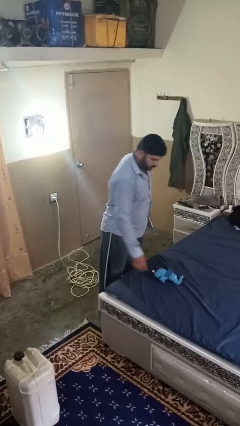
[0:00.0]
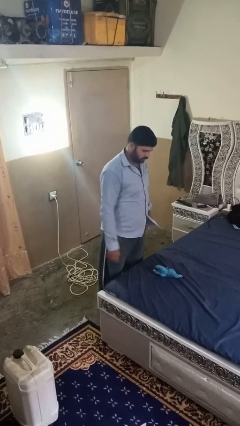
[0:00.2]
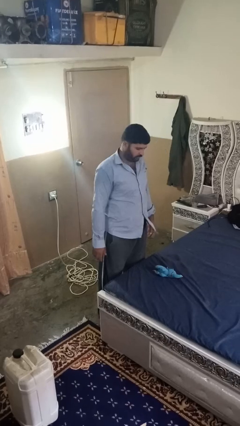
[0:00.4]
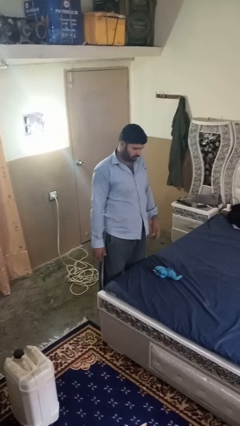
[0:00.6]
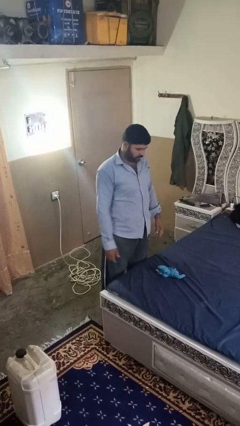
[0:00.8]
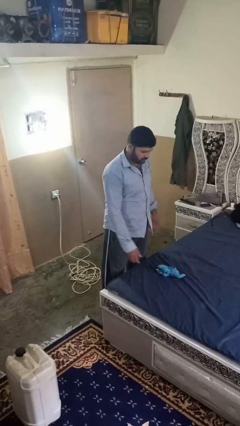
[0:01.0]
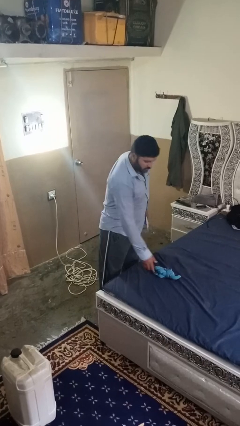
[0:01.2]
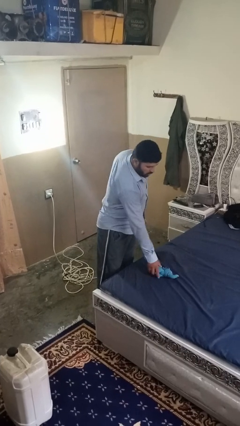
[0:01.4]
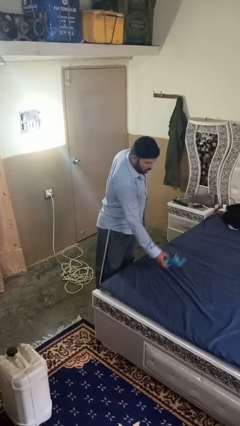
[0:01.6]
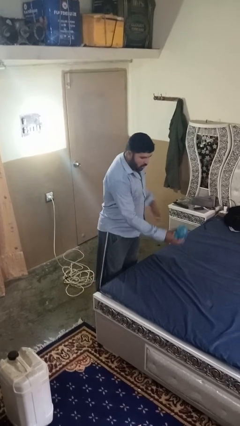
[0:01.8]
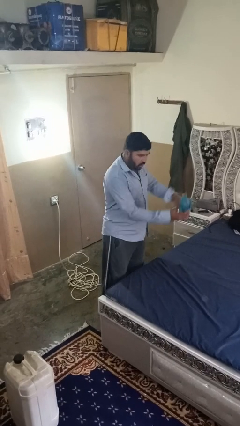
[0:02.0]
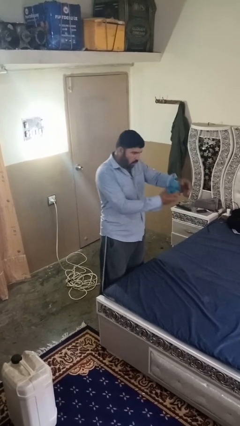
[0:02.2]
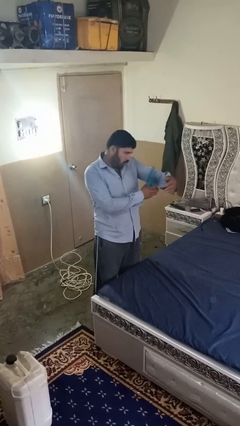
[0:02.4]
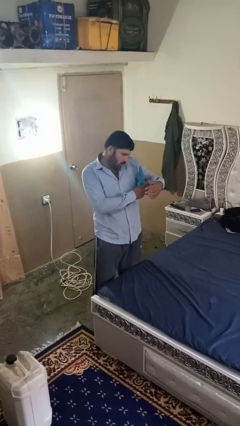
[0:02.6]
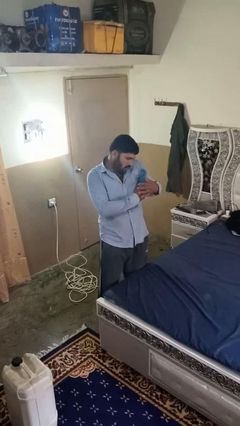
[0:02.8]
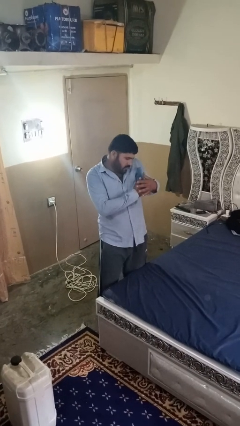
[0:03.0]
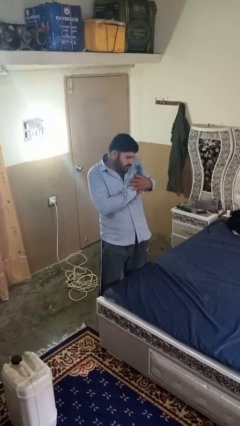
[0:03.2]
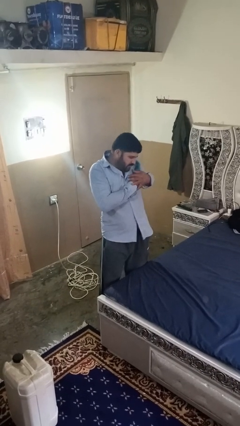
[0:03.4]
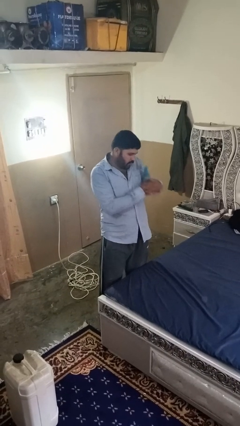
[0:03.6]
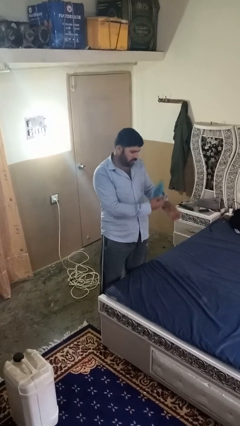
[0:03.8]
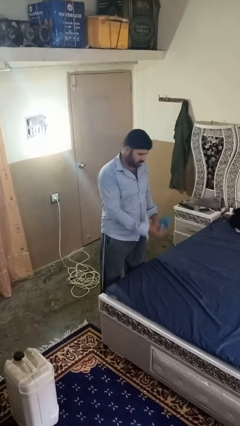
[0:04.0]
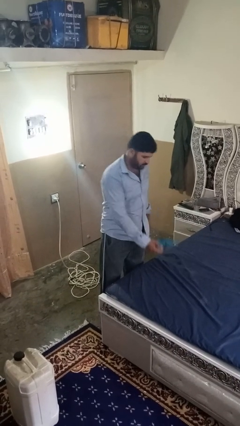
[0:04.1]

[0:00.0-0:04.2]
person hugs stuffed animal

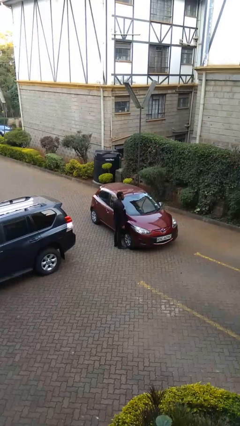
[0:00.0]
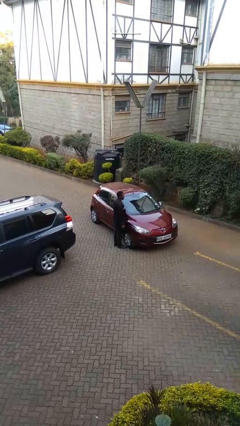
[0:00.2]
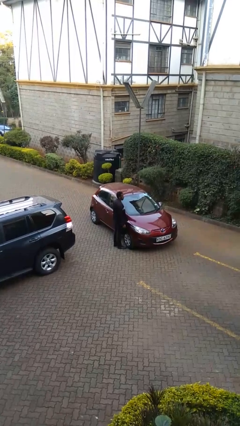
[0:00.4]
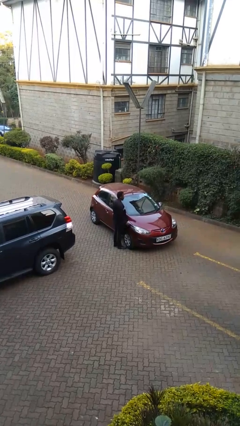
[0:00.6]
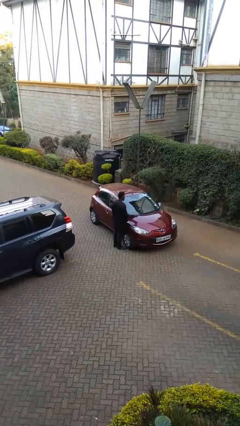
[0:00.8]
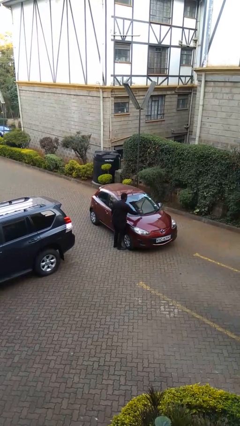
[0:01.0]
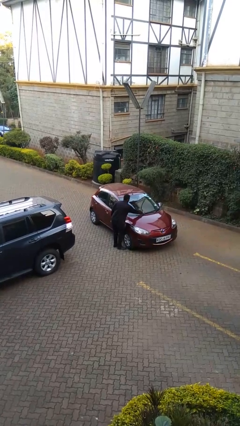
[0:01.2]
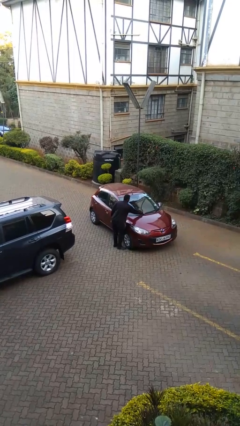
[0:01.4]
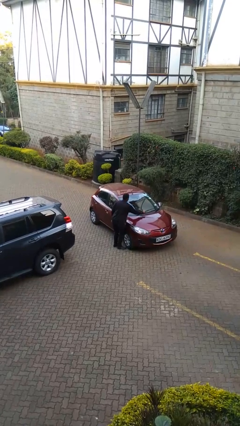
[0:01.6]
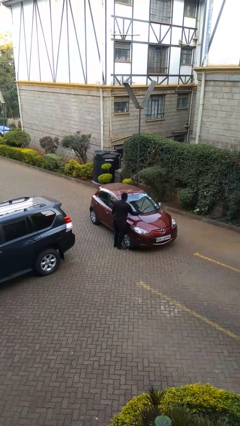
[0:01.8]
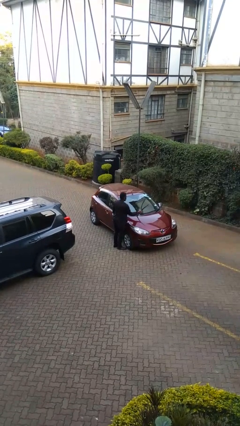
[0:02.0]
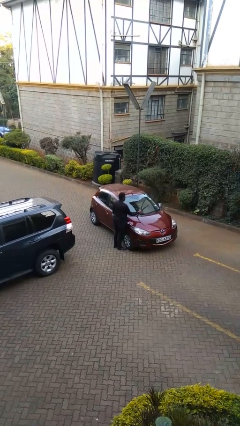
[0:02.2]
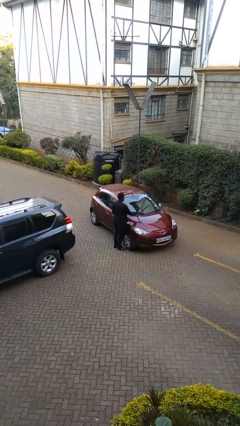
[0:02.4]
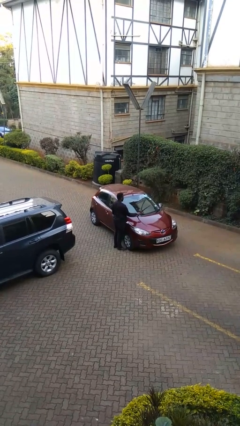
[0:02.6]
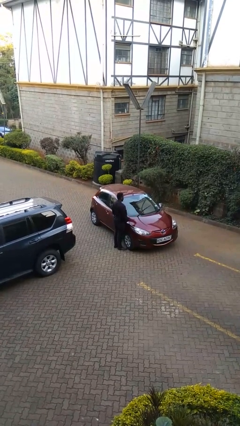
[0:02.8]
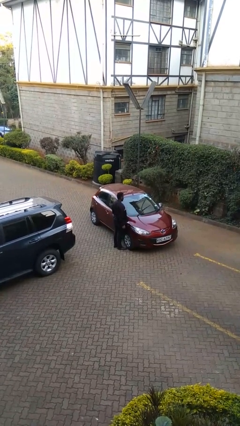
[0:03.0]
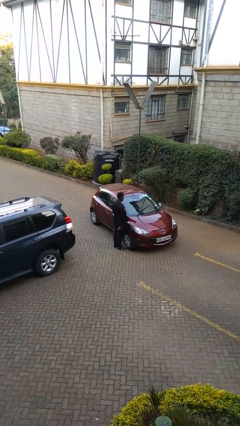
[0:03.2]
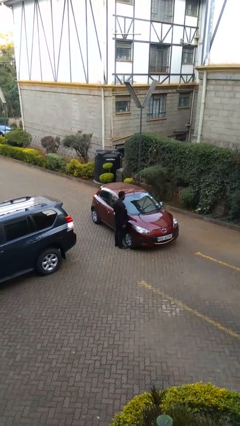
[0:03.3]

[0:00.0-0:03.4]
person flips up car wipers

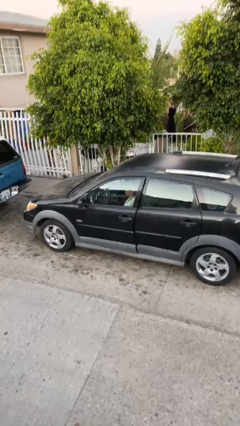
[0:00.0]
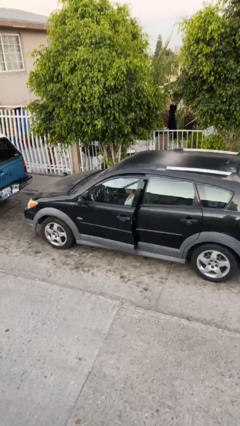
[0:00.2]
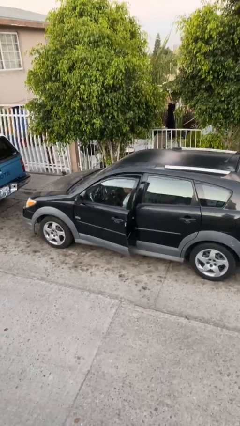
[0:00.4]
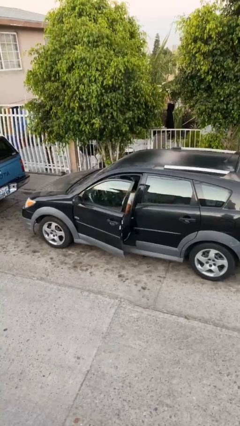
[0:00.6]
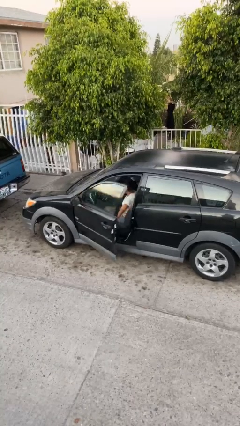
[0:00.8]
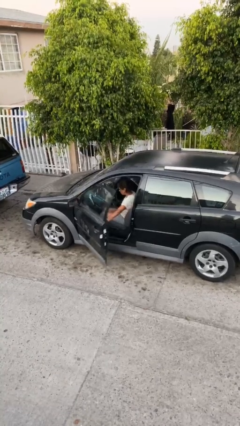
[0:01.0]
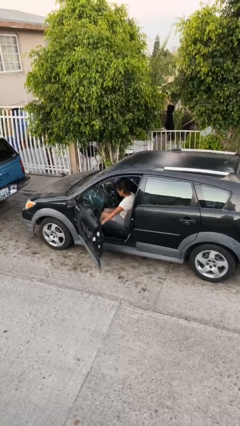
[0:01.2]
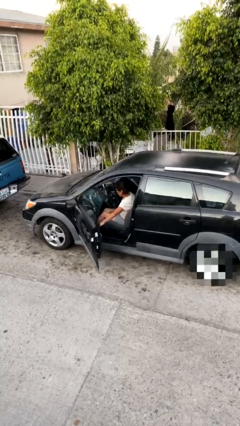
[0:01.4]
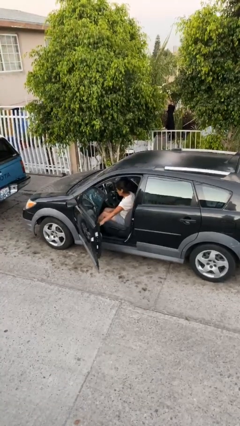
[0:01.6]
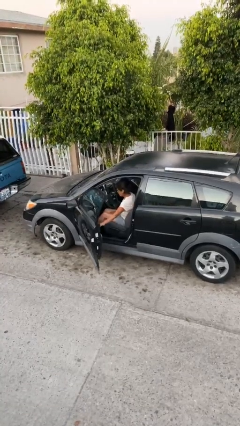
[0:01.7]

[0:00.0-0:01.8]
person opens car door

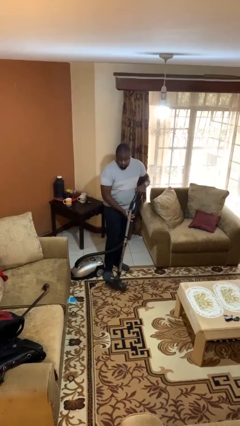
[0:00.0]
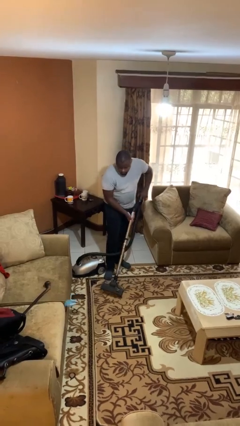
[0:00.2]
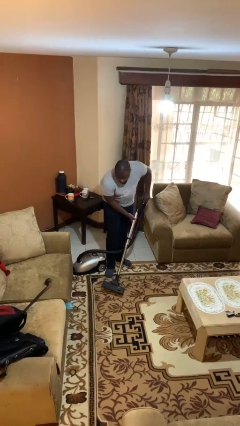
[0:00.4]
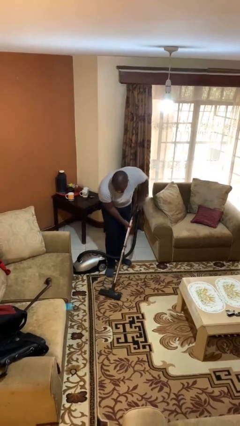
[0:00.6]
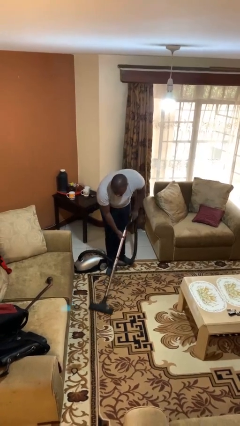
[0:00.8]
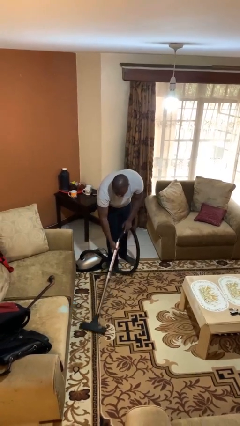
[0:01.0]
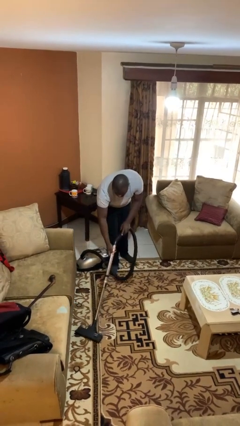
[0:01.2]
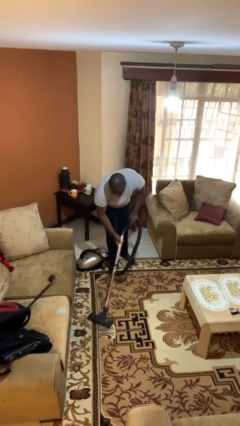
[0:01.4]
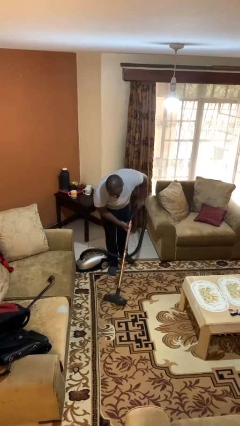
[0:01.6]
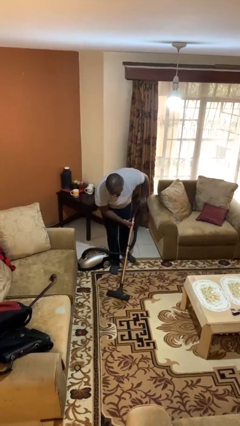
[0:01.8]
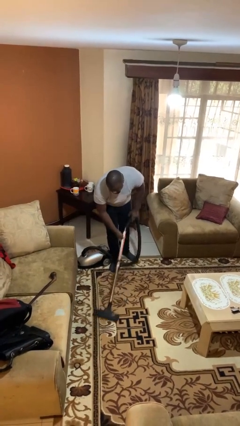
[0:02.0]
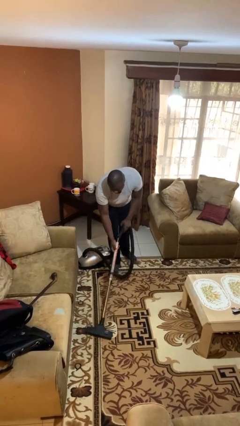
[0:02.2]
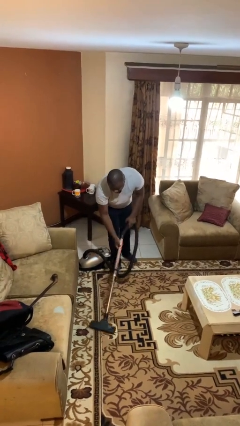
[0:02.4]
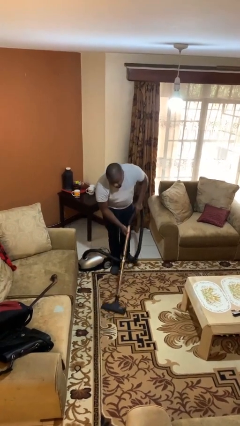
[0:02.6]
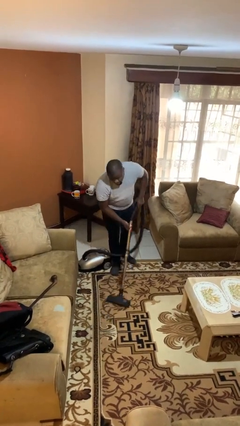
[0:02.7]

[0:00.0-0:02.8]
person vacuums carpet

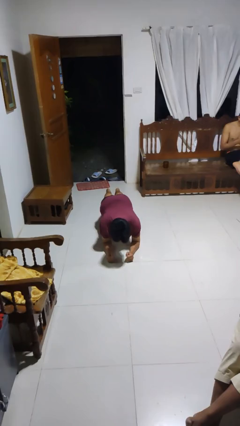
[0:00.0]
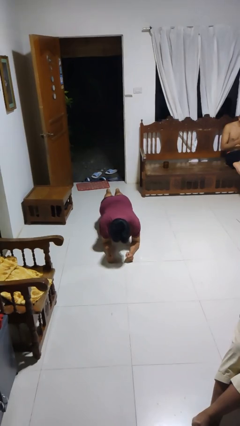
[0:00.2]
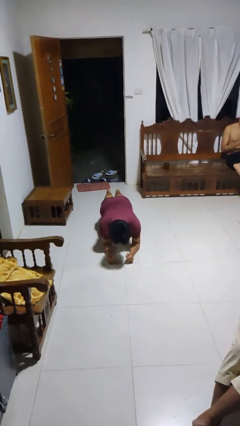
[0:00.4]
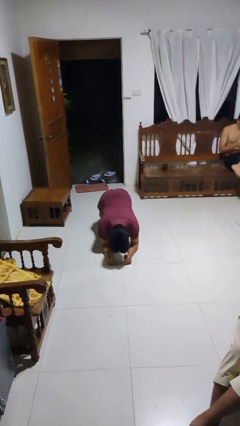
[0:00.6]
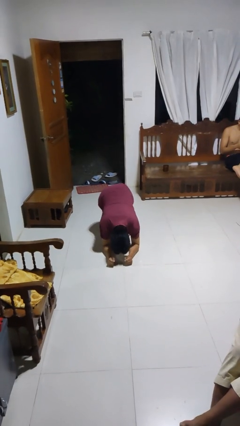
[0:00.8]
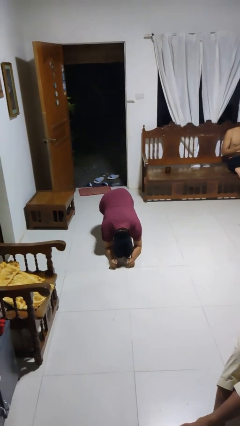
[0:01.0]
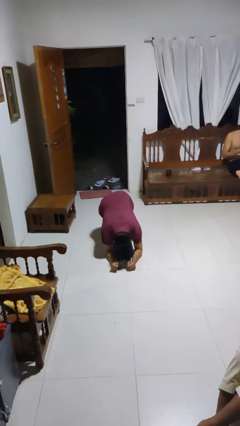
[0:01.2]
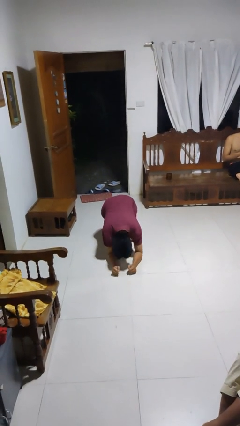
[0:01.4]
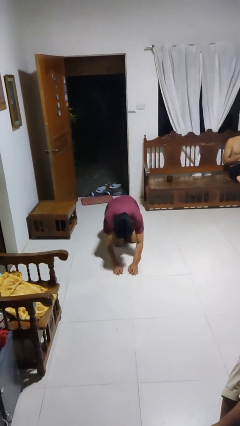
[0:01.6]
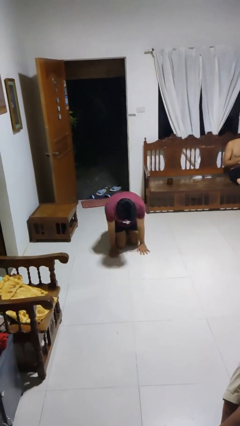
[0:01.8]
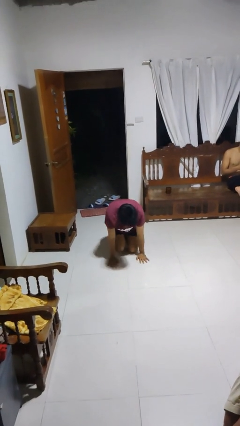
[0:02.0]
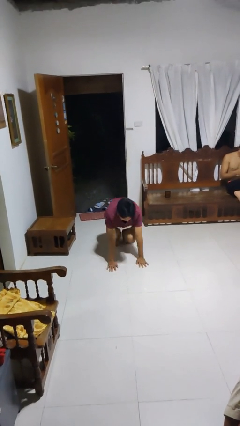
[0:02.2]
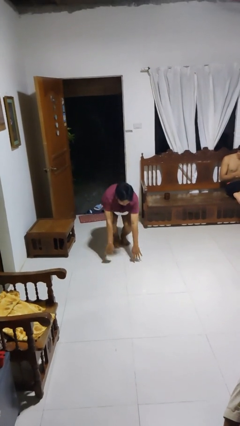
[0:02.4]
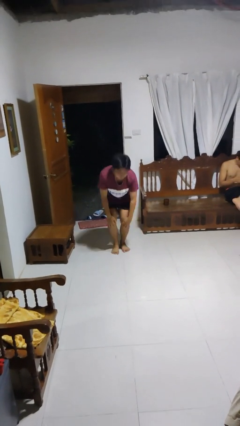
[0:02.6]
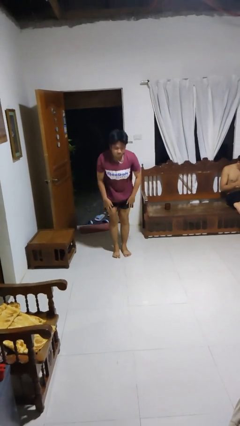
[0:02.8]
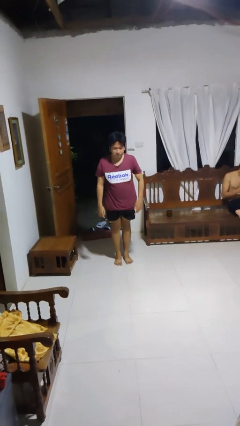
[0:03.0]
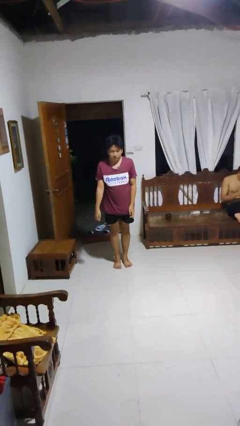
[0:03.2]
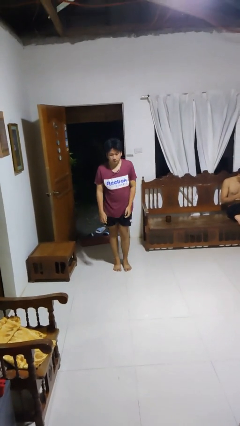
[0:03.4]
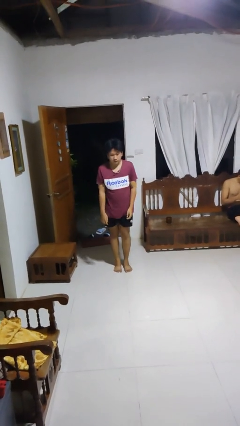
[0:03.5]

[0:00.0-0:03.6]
person stands up from floor

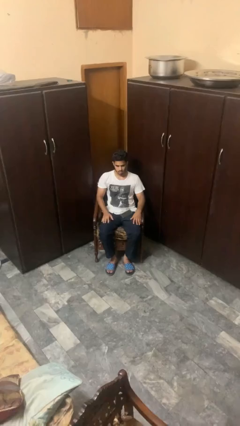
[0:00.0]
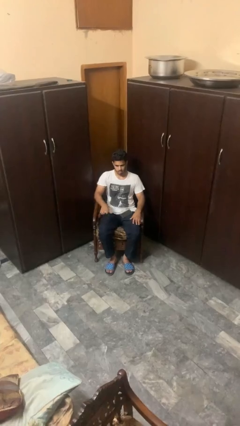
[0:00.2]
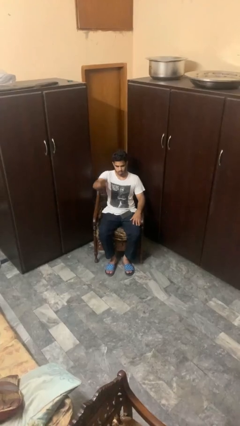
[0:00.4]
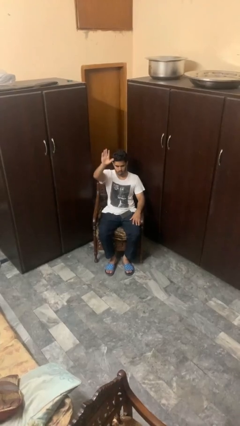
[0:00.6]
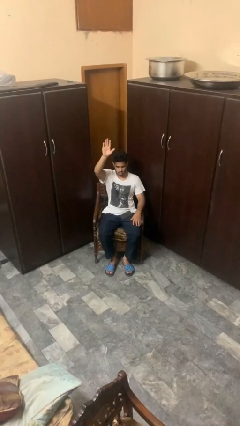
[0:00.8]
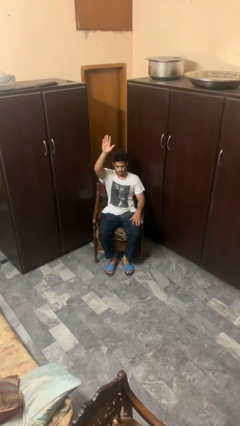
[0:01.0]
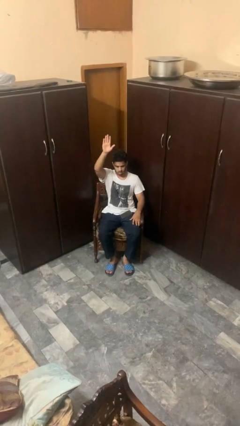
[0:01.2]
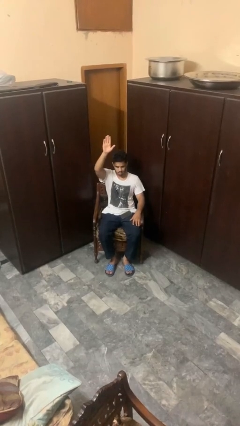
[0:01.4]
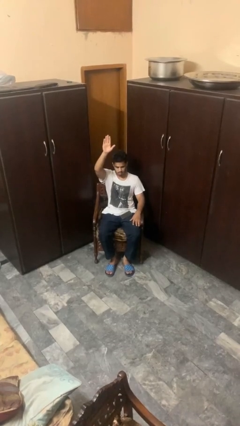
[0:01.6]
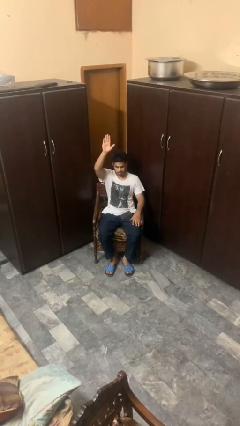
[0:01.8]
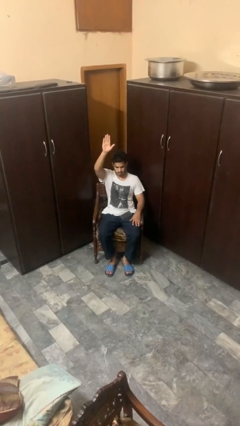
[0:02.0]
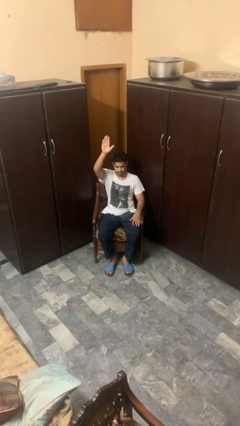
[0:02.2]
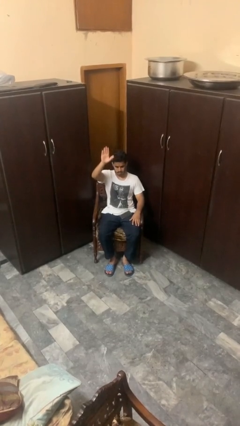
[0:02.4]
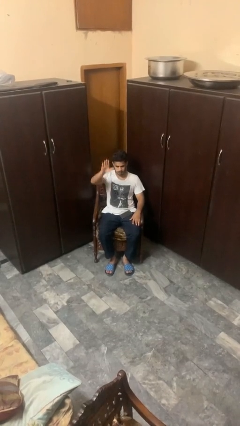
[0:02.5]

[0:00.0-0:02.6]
person gestures raise hand
